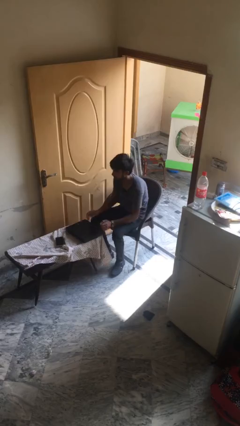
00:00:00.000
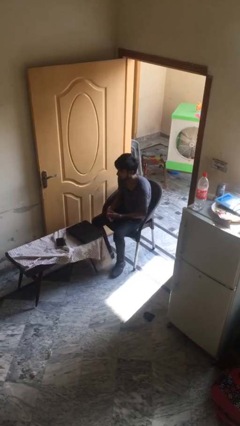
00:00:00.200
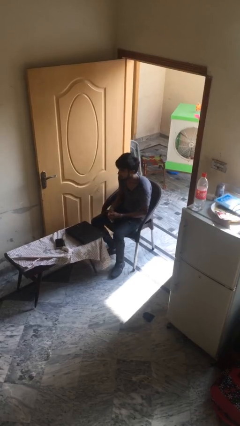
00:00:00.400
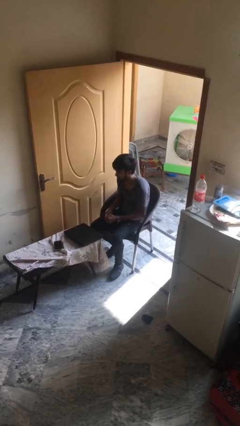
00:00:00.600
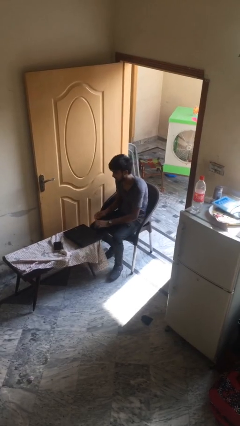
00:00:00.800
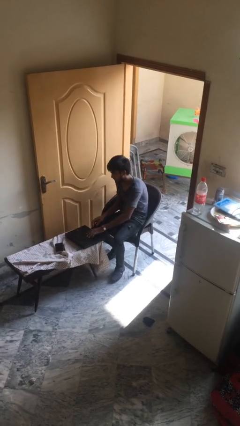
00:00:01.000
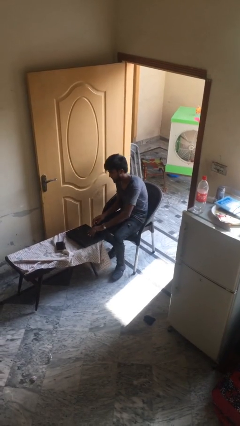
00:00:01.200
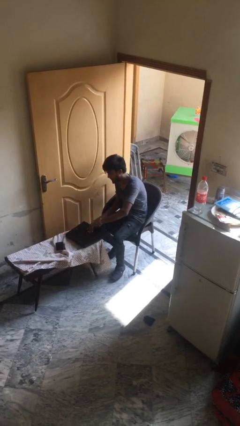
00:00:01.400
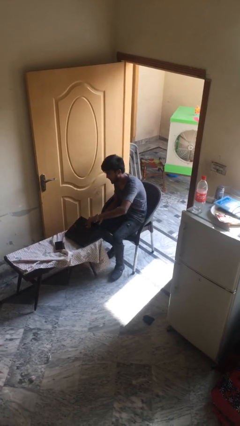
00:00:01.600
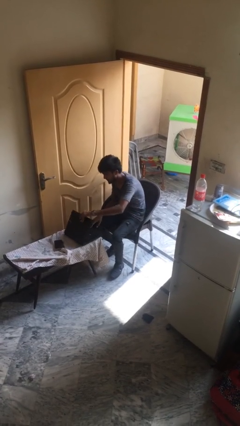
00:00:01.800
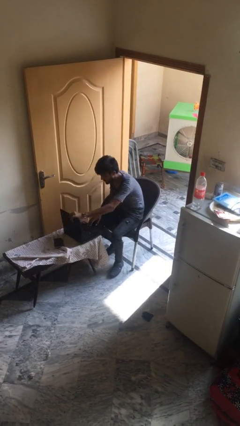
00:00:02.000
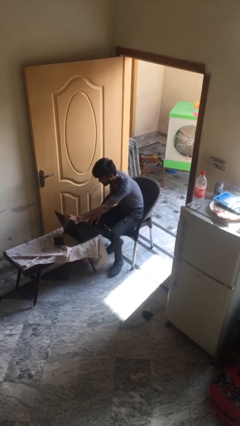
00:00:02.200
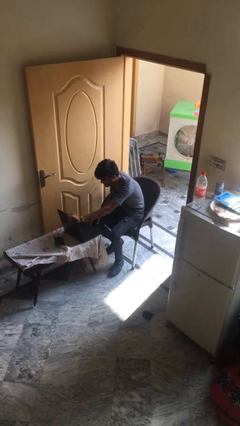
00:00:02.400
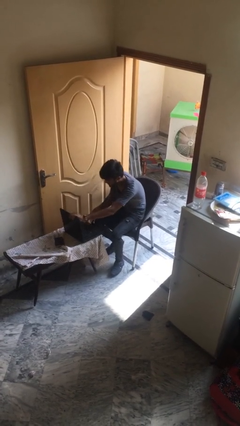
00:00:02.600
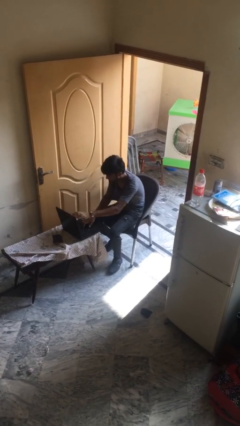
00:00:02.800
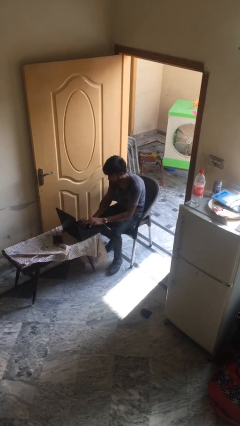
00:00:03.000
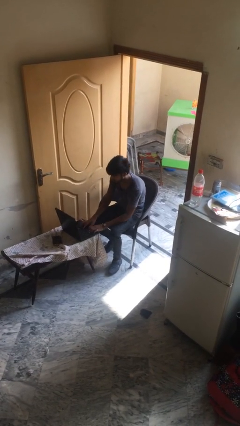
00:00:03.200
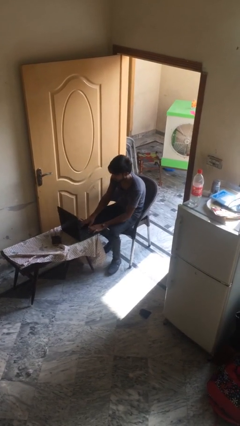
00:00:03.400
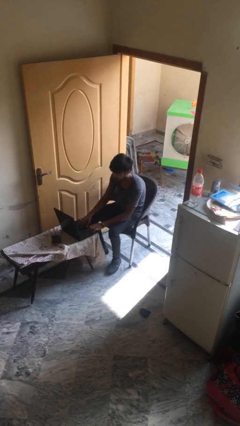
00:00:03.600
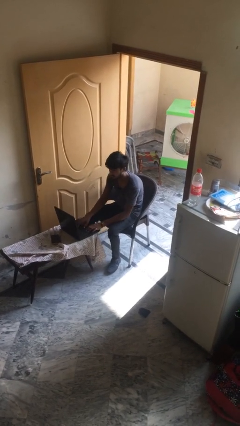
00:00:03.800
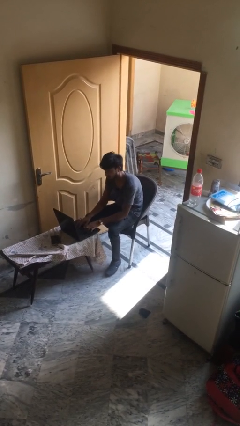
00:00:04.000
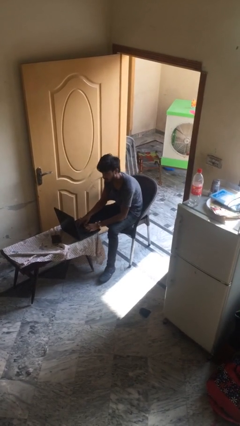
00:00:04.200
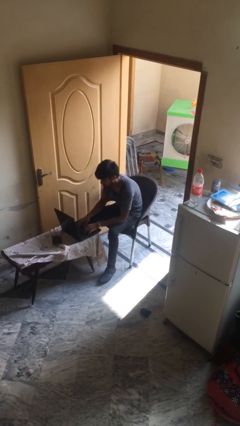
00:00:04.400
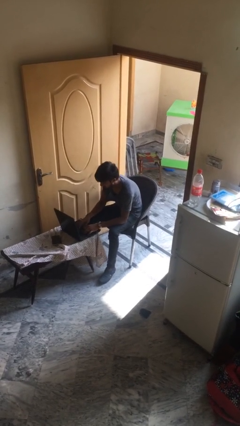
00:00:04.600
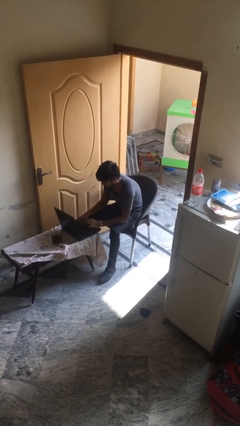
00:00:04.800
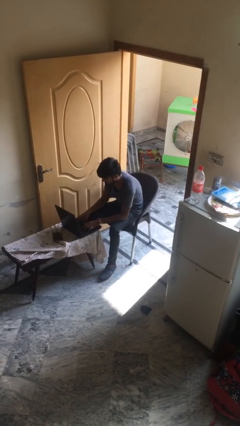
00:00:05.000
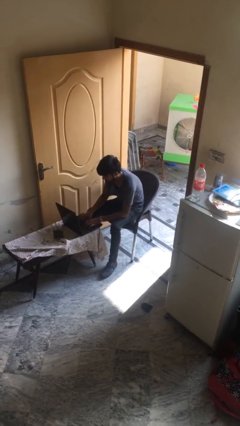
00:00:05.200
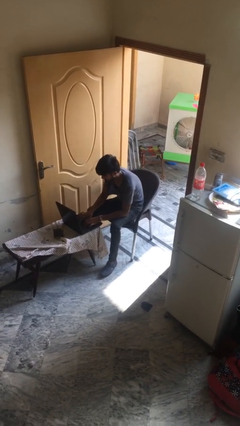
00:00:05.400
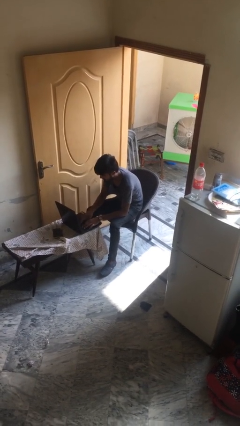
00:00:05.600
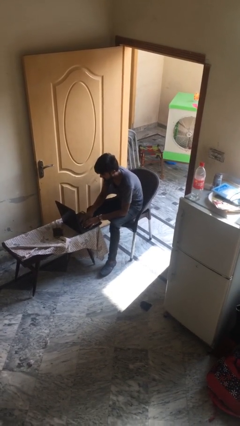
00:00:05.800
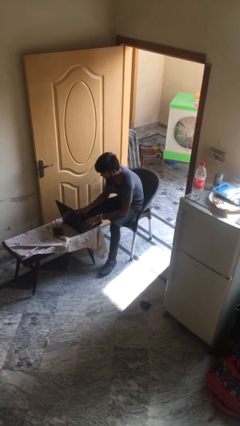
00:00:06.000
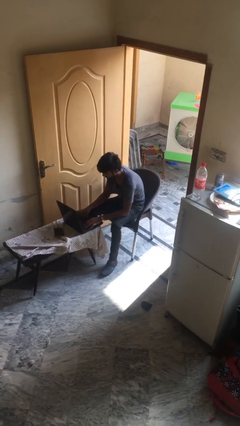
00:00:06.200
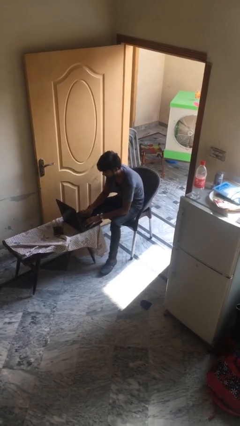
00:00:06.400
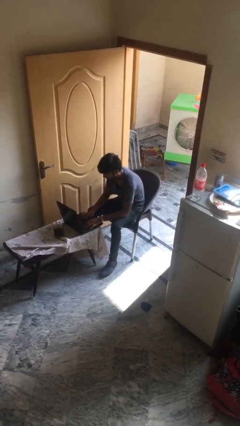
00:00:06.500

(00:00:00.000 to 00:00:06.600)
person interacts with laptop

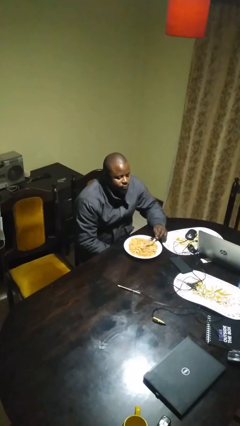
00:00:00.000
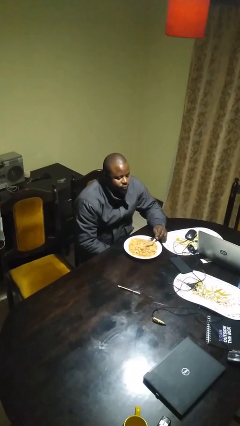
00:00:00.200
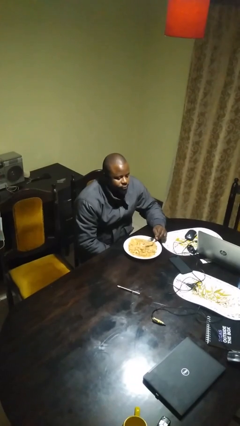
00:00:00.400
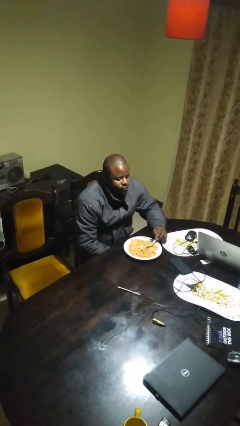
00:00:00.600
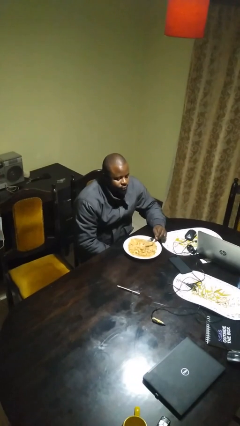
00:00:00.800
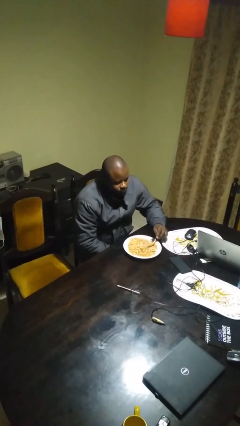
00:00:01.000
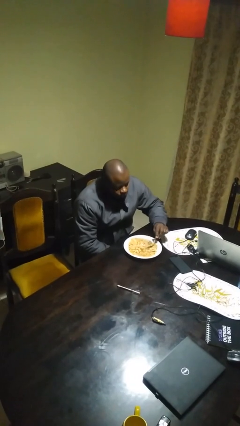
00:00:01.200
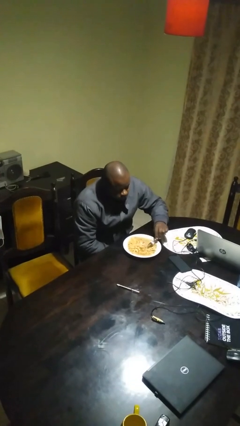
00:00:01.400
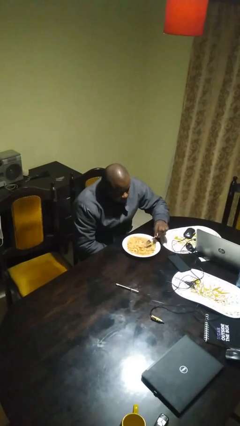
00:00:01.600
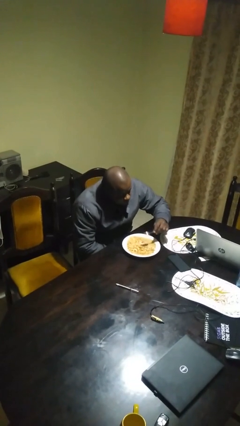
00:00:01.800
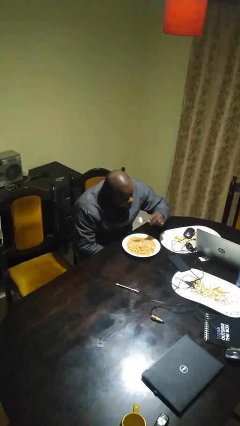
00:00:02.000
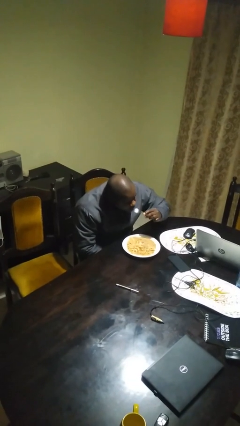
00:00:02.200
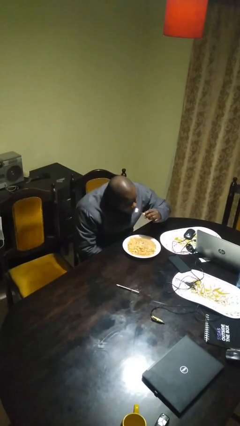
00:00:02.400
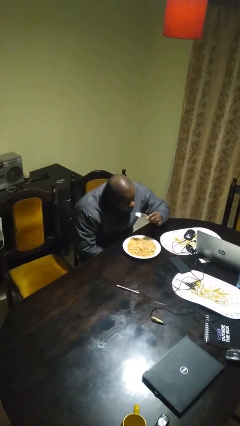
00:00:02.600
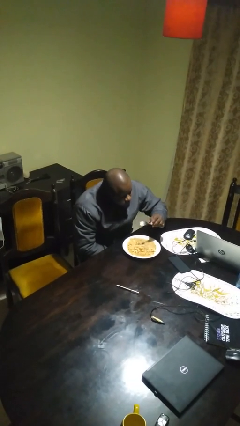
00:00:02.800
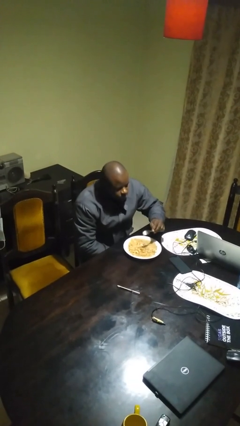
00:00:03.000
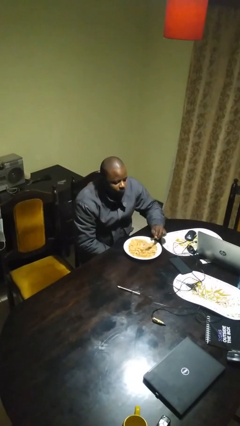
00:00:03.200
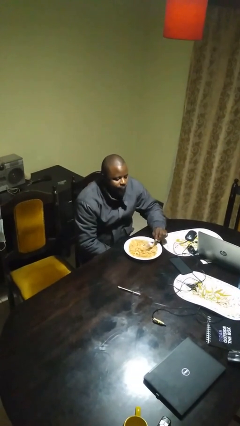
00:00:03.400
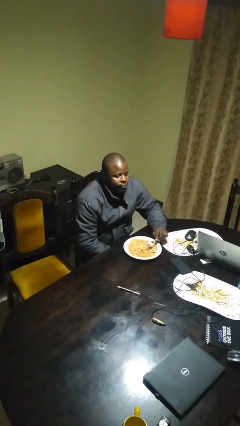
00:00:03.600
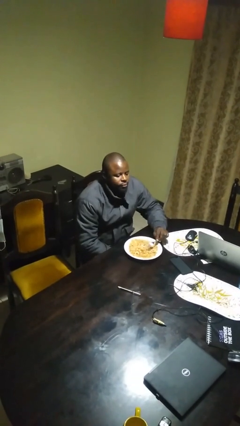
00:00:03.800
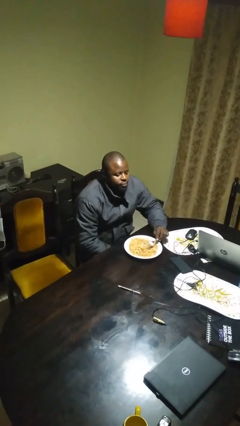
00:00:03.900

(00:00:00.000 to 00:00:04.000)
person eats with utensil

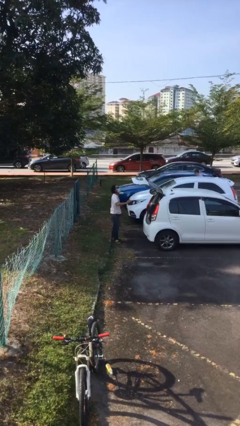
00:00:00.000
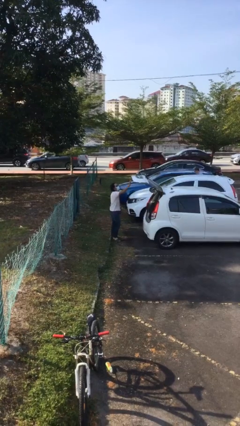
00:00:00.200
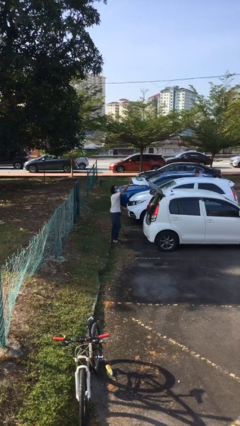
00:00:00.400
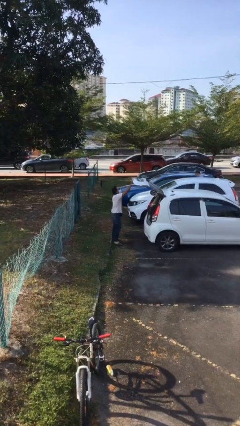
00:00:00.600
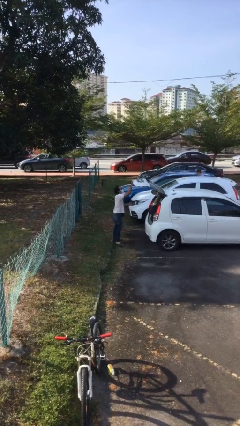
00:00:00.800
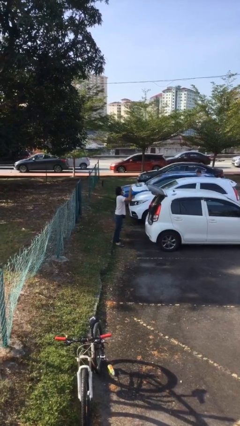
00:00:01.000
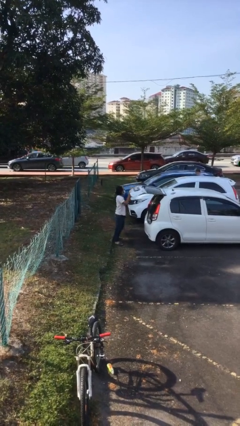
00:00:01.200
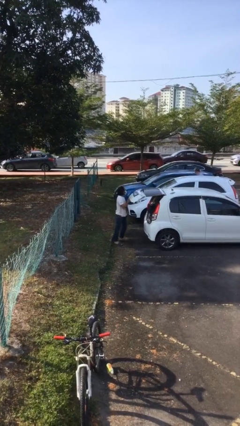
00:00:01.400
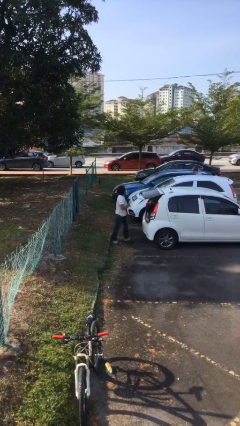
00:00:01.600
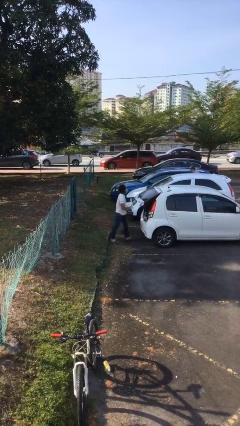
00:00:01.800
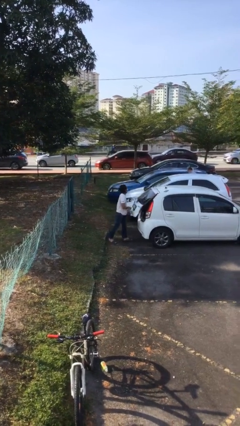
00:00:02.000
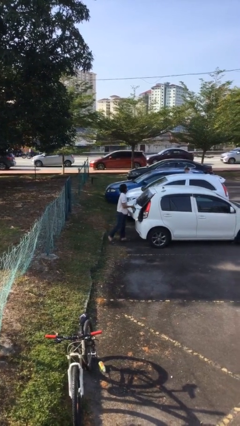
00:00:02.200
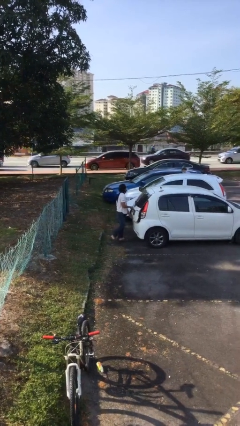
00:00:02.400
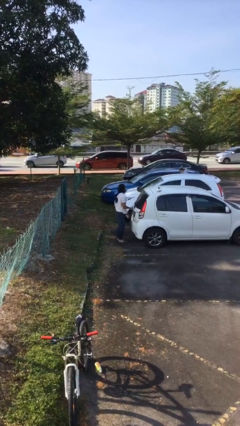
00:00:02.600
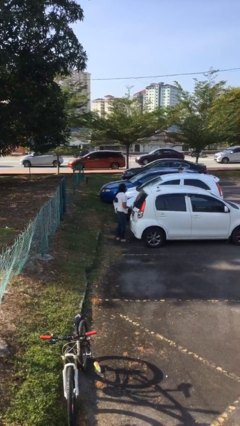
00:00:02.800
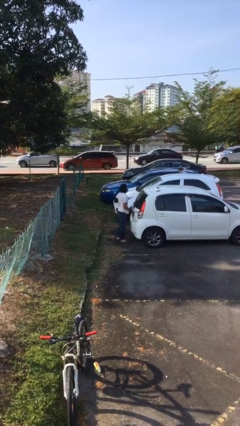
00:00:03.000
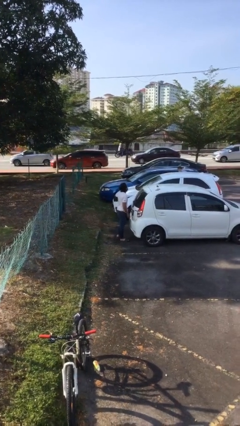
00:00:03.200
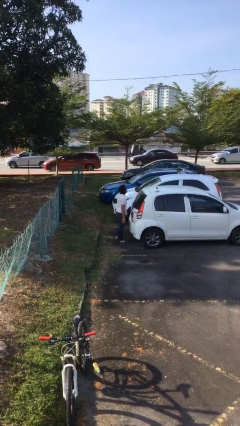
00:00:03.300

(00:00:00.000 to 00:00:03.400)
person closes car trunk

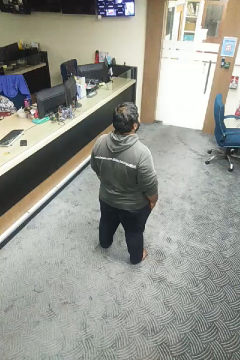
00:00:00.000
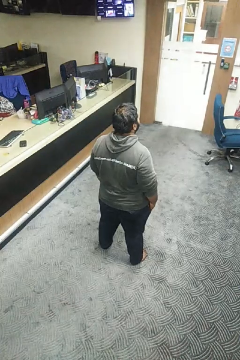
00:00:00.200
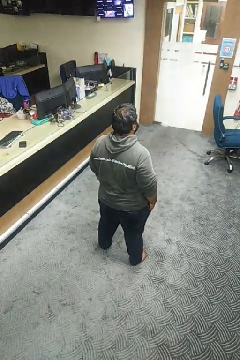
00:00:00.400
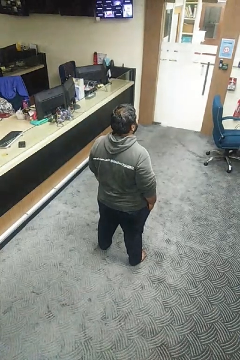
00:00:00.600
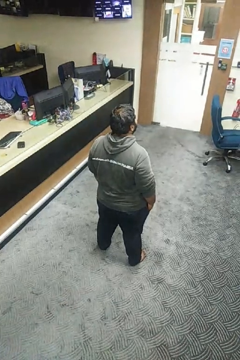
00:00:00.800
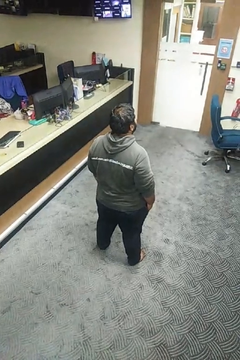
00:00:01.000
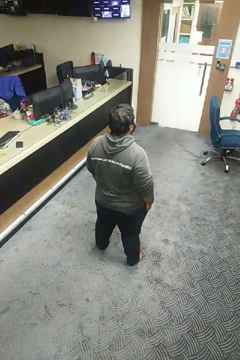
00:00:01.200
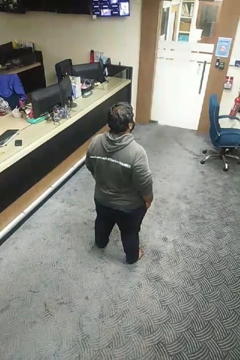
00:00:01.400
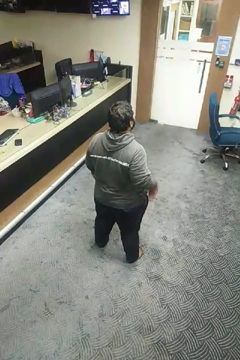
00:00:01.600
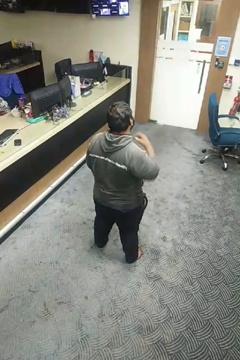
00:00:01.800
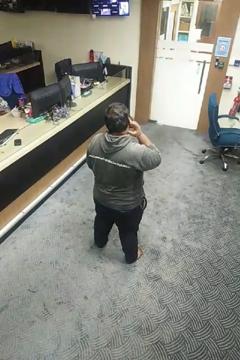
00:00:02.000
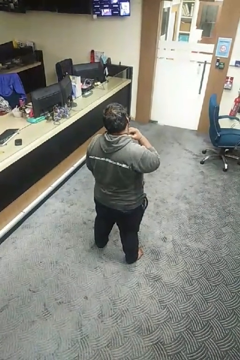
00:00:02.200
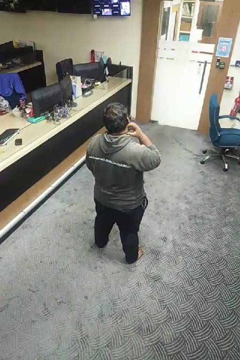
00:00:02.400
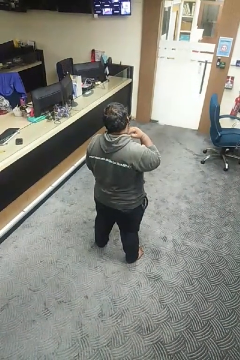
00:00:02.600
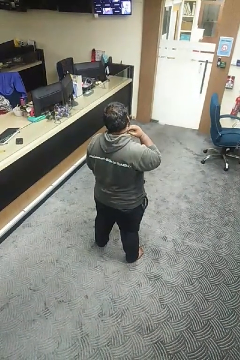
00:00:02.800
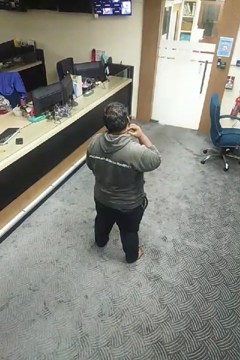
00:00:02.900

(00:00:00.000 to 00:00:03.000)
person rubs neck

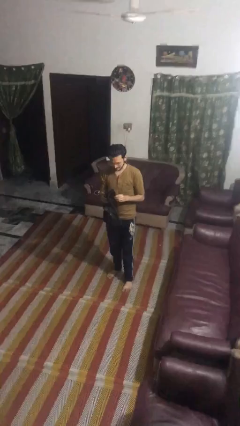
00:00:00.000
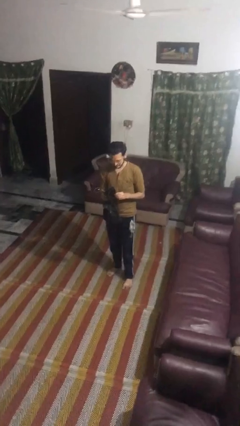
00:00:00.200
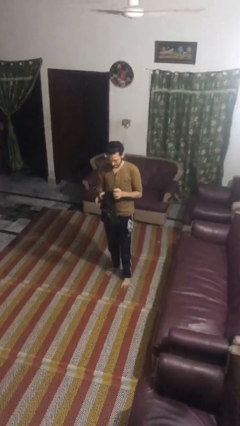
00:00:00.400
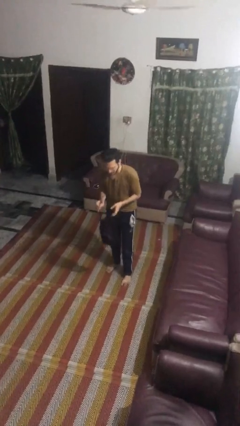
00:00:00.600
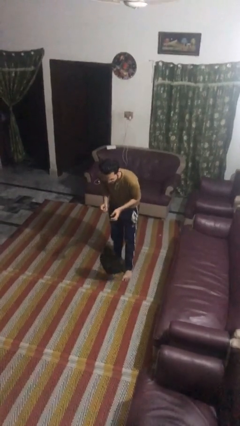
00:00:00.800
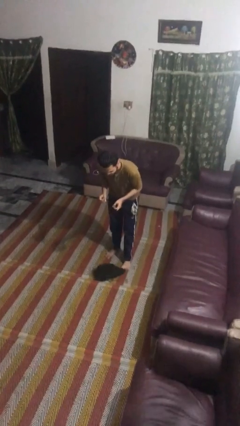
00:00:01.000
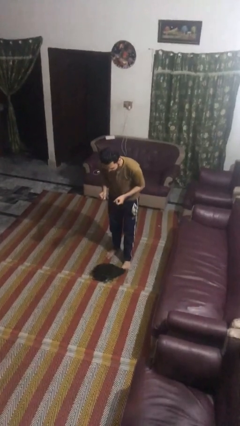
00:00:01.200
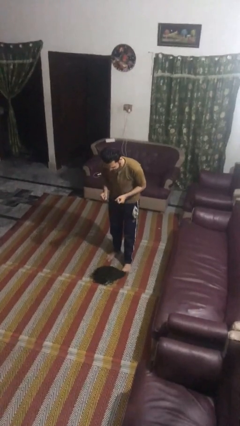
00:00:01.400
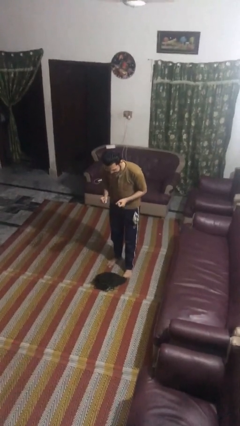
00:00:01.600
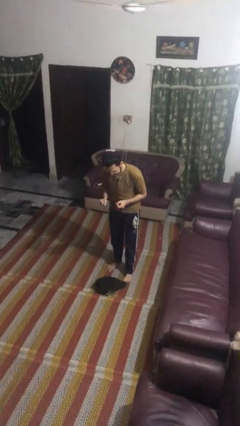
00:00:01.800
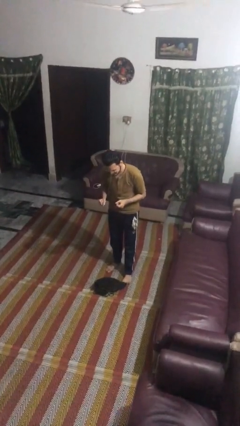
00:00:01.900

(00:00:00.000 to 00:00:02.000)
person drops object
